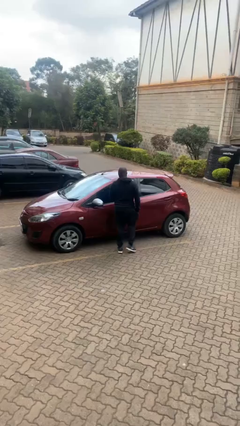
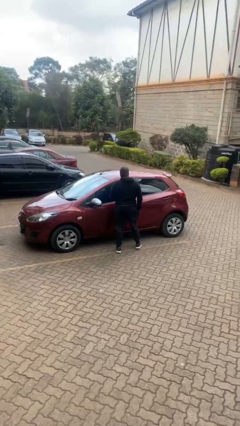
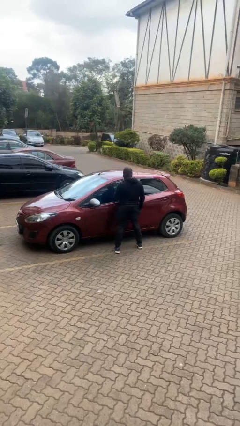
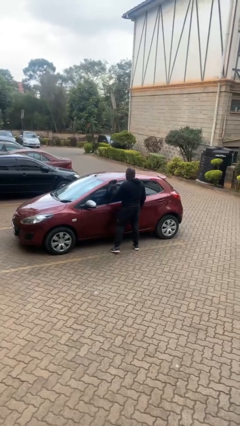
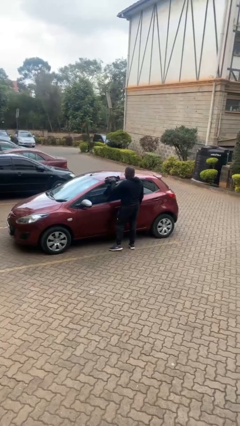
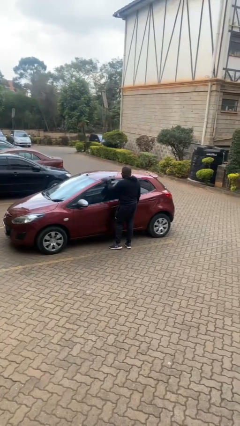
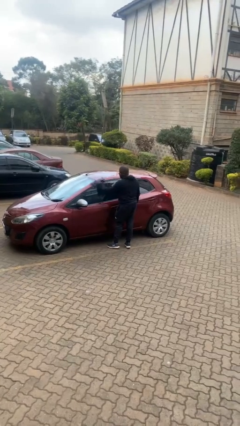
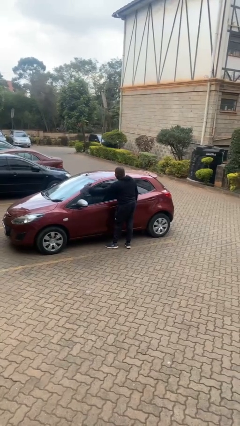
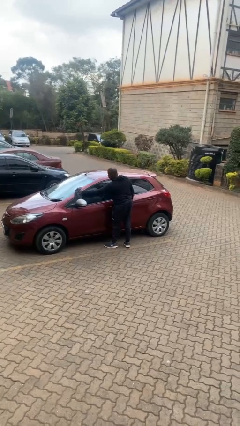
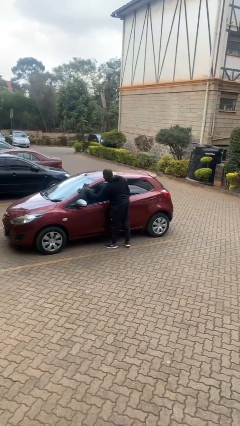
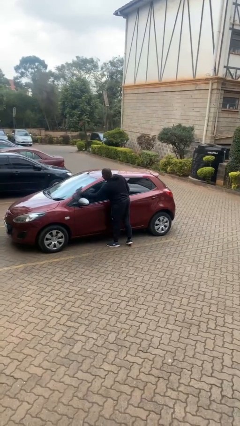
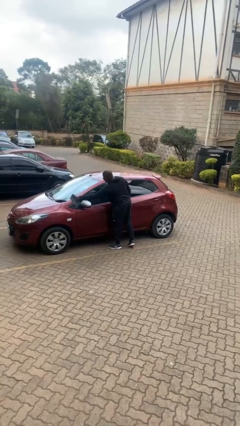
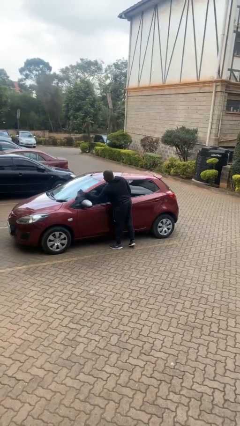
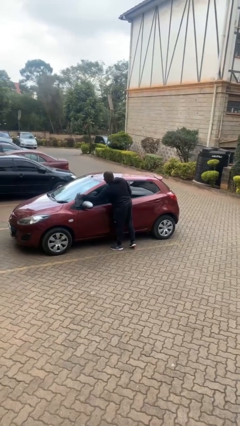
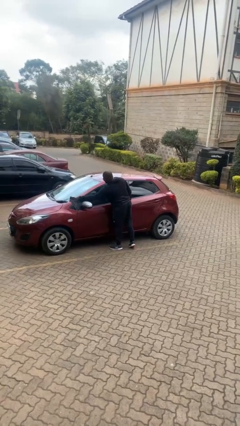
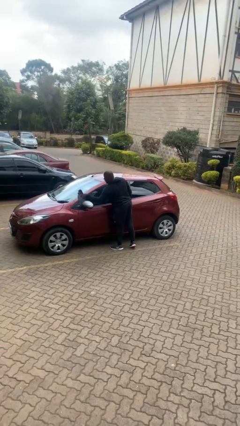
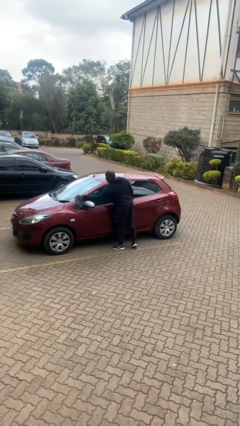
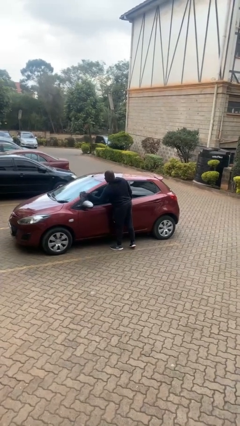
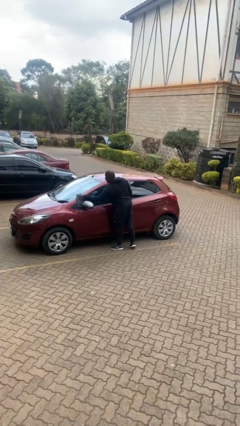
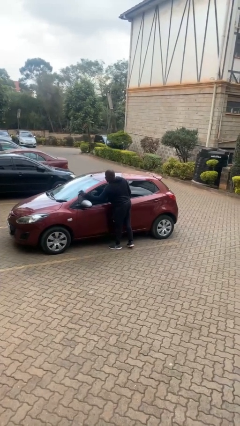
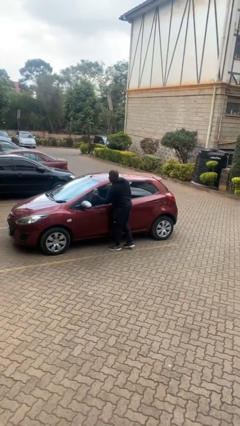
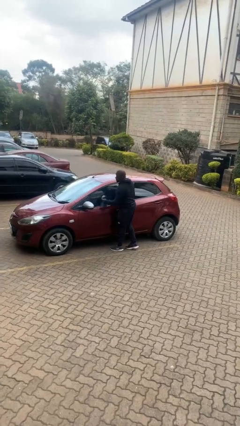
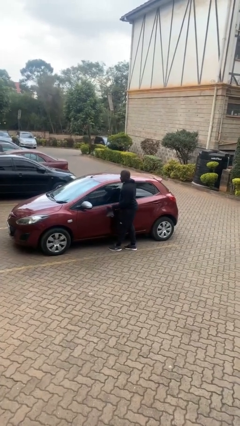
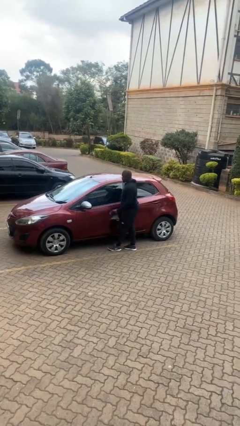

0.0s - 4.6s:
person polishes car with rag

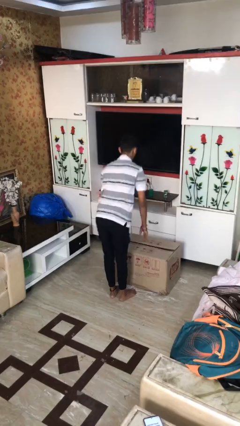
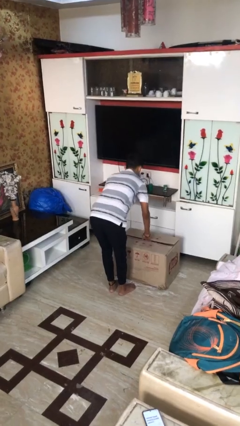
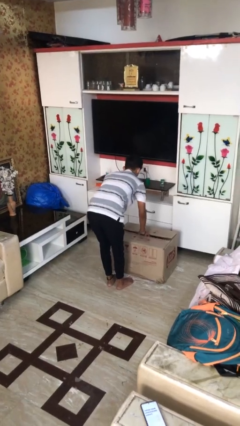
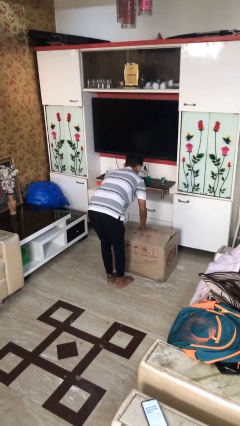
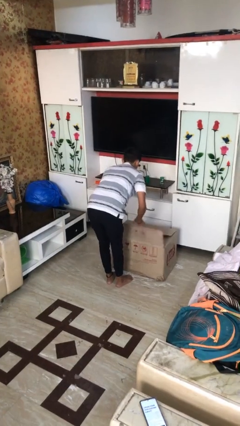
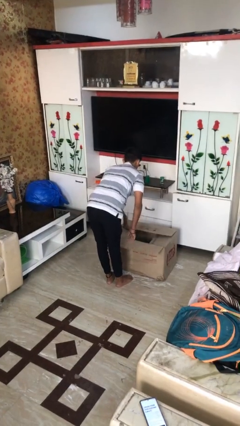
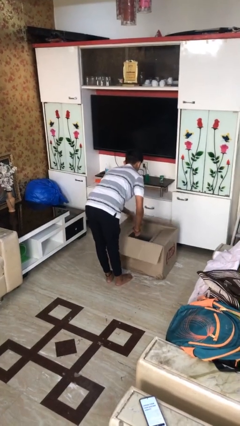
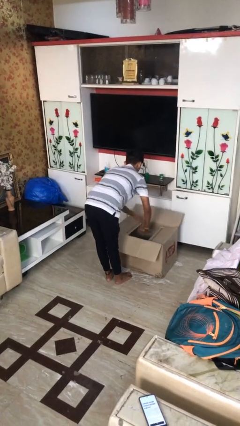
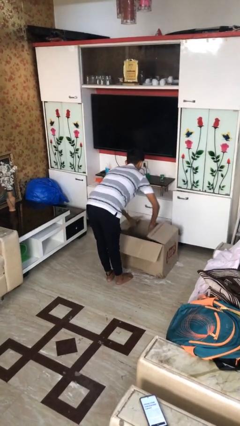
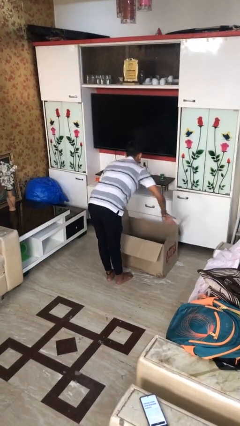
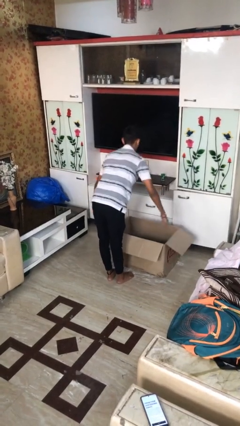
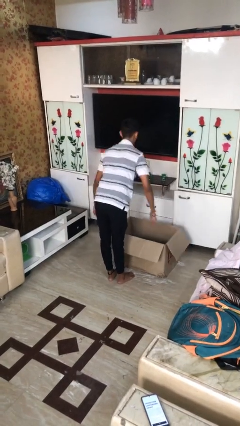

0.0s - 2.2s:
person opens box

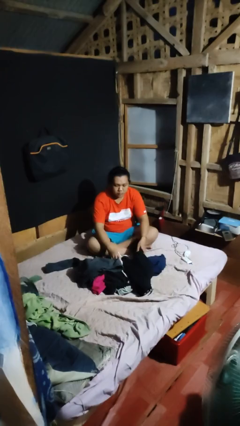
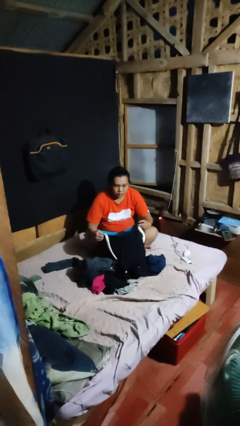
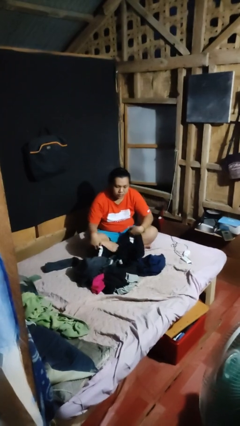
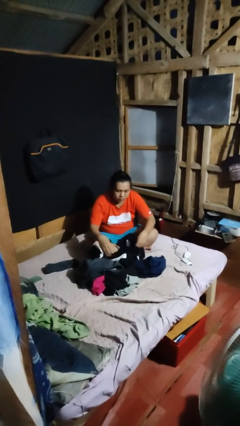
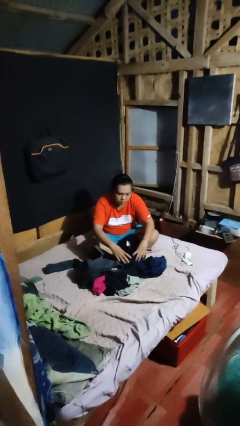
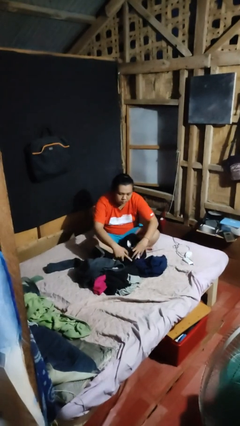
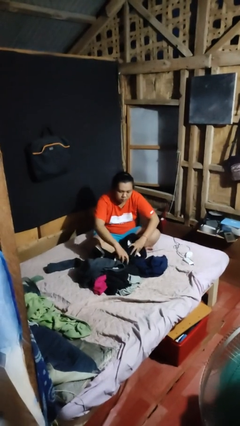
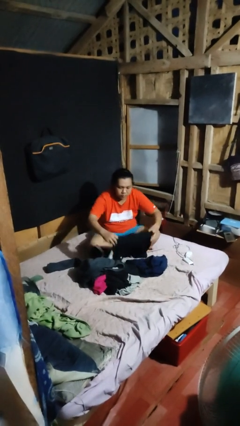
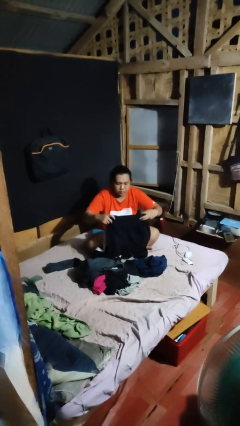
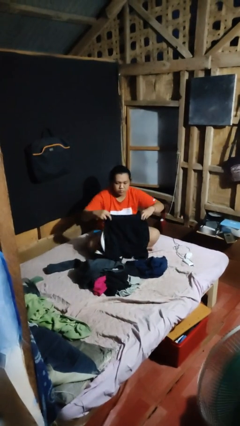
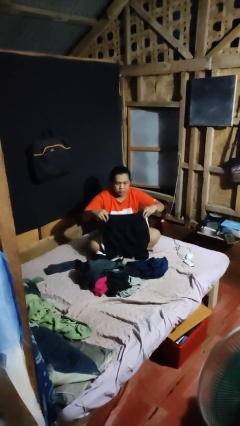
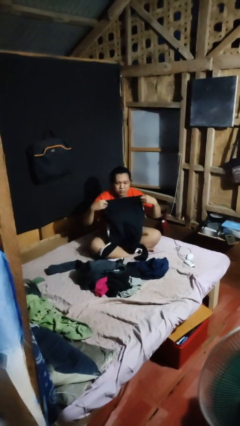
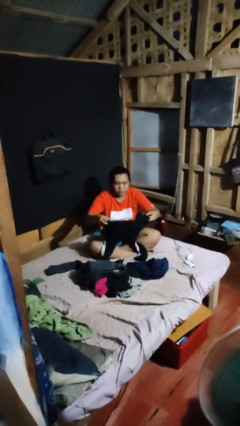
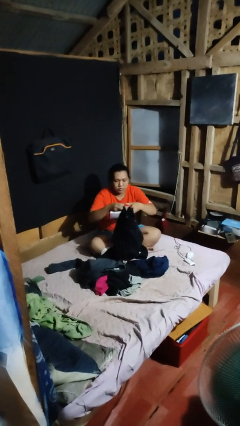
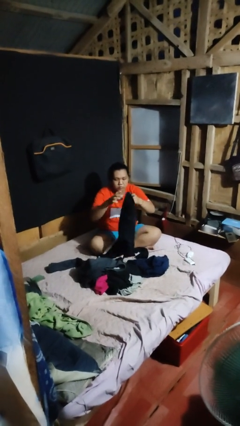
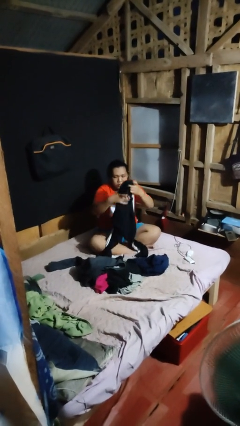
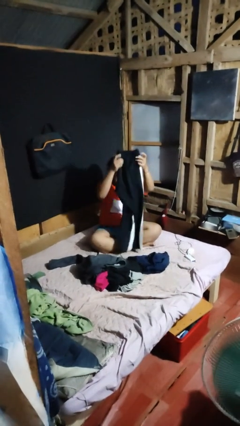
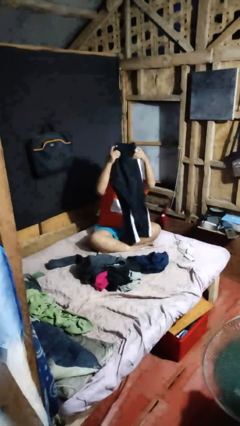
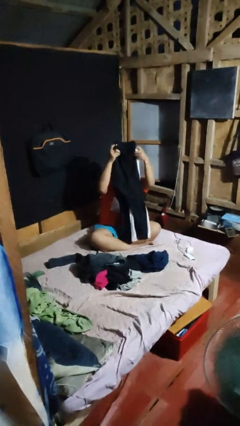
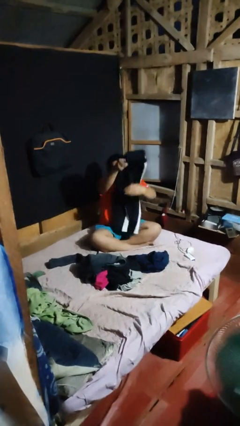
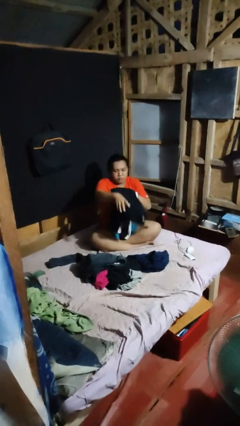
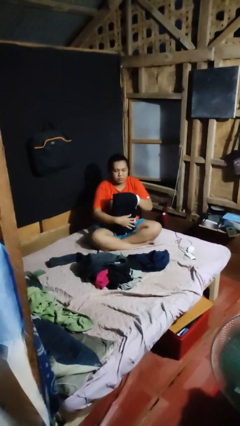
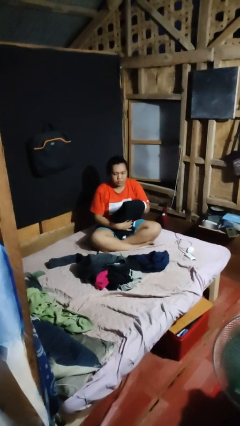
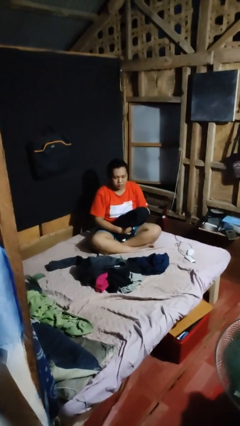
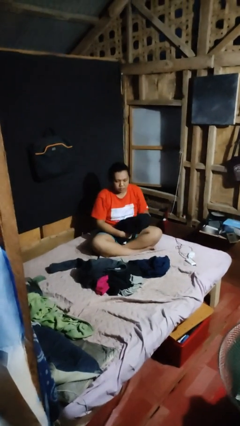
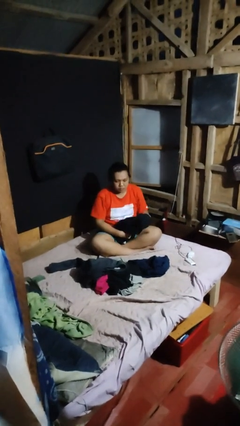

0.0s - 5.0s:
person folds pants

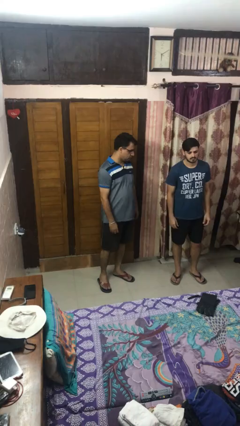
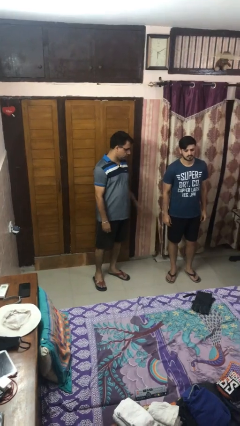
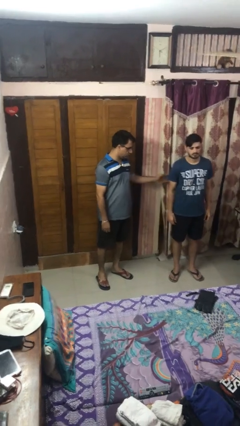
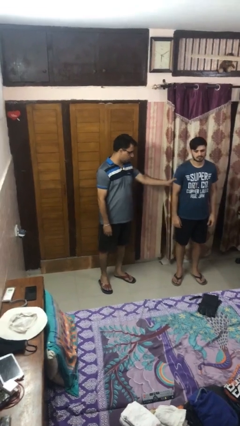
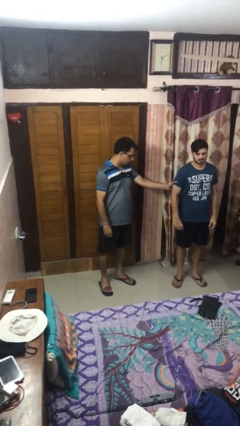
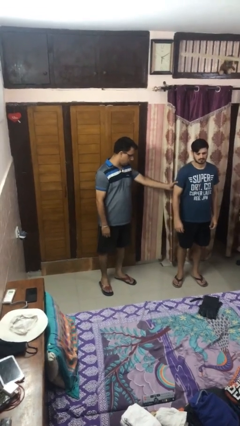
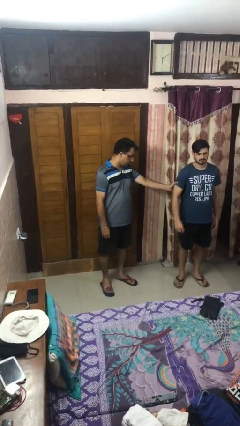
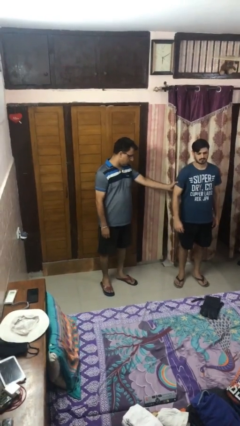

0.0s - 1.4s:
person grabs person by bicep

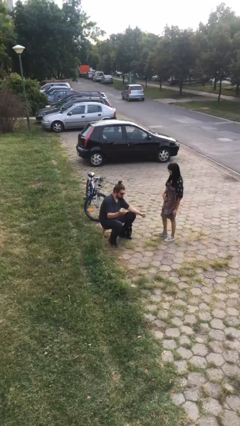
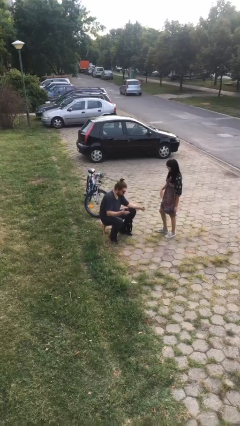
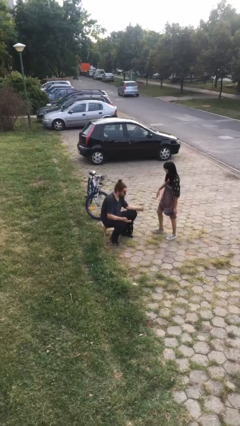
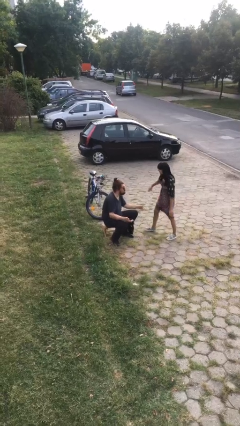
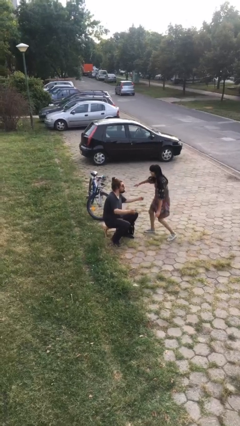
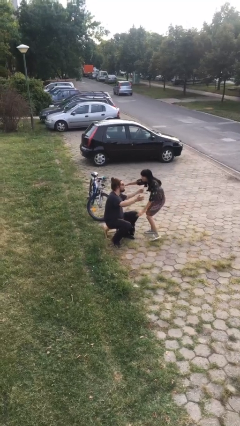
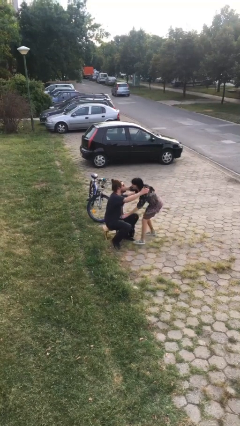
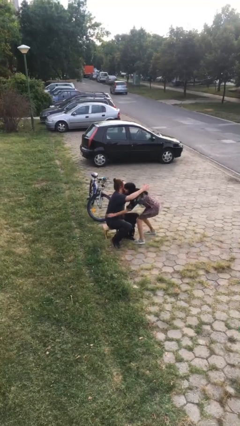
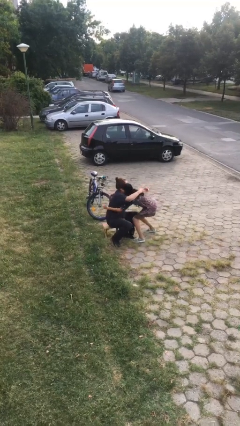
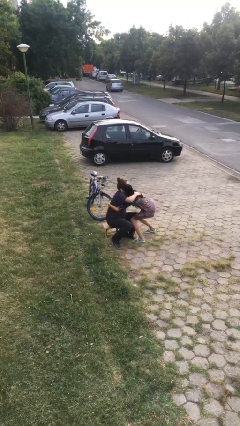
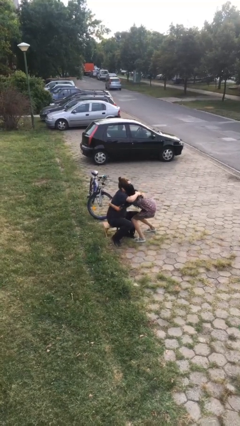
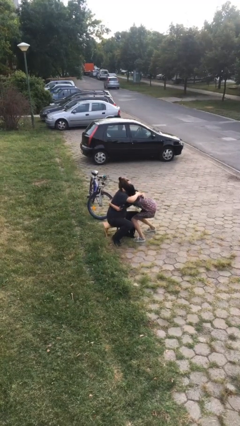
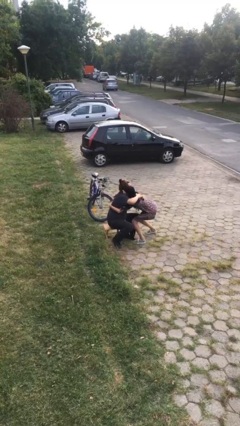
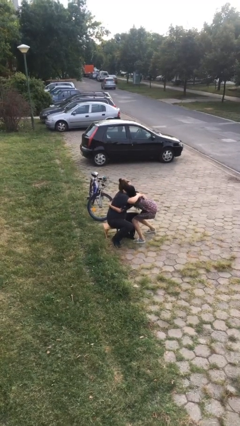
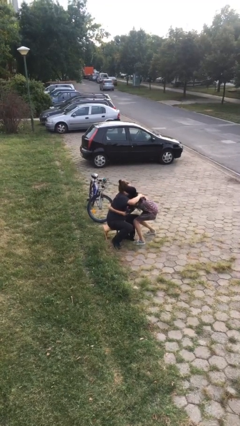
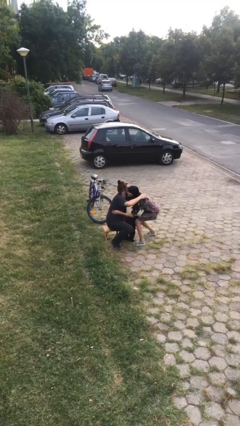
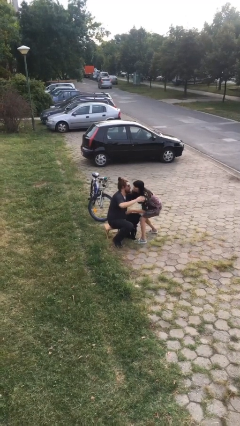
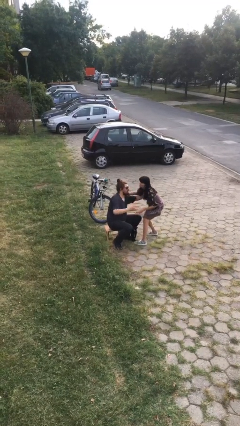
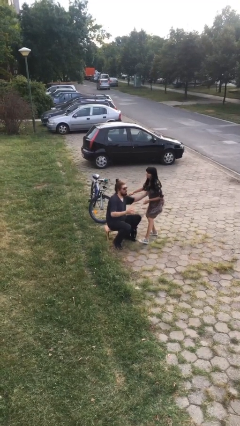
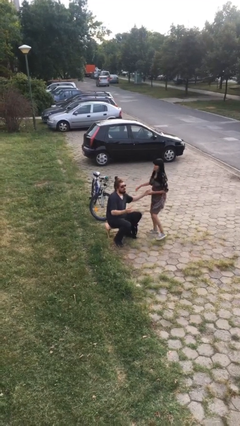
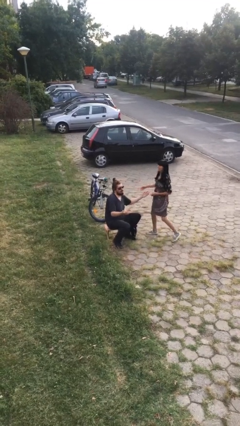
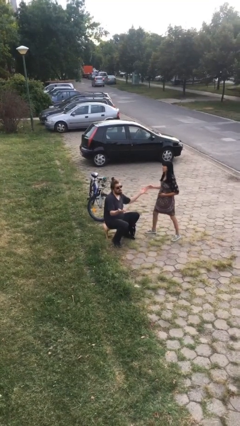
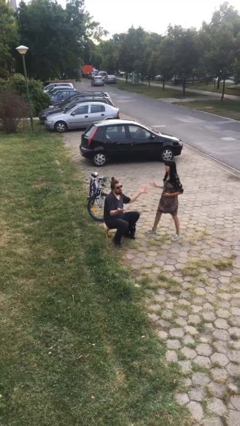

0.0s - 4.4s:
person embraces person
